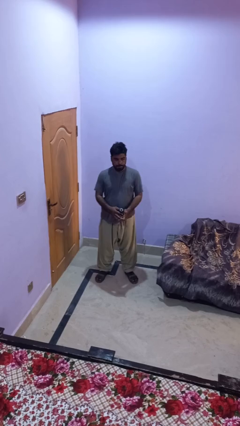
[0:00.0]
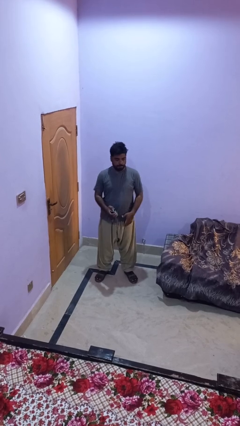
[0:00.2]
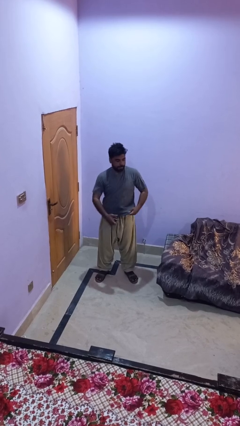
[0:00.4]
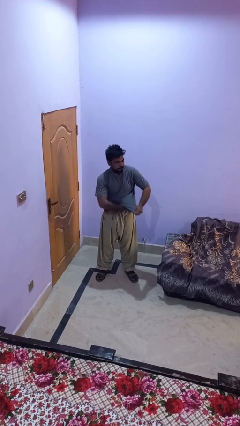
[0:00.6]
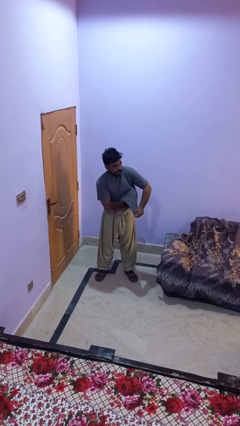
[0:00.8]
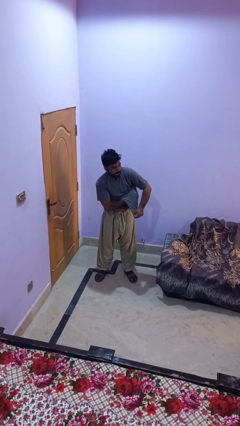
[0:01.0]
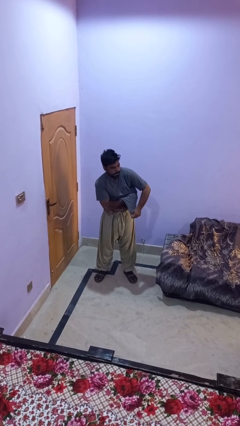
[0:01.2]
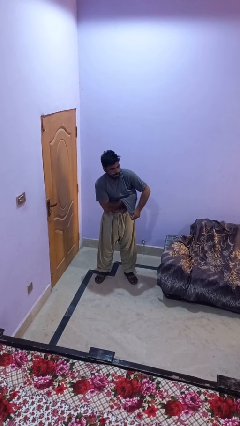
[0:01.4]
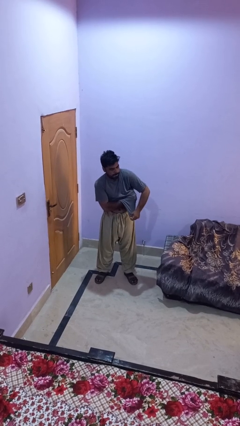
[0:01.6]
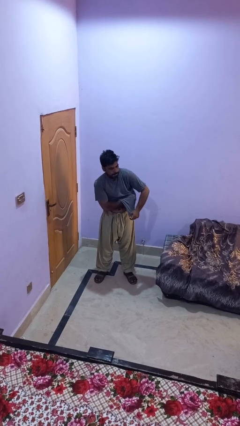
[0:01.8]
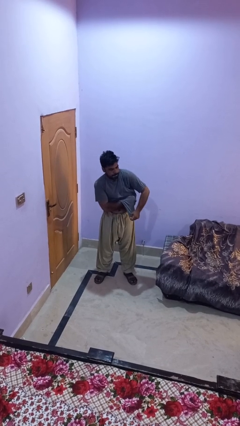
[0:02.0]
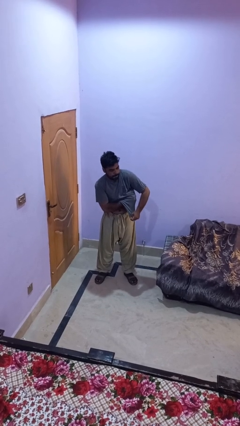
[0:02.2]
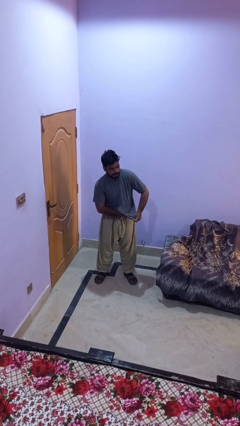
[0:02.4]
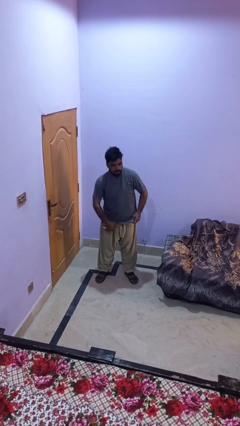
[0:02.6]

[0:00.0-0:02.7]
person applies deodorant

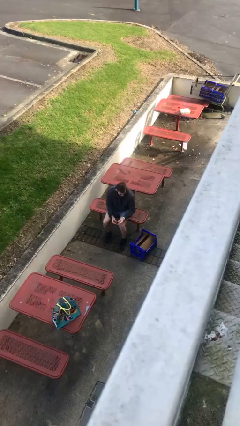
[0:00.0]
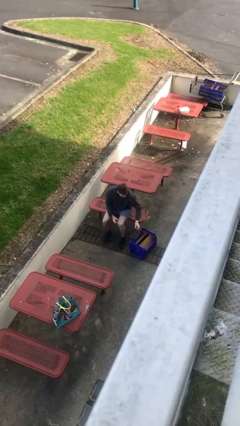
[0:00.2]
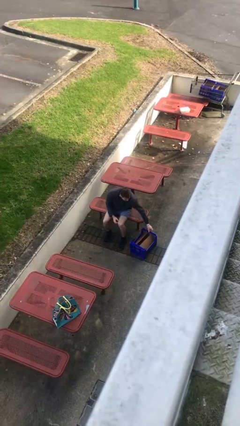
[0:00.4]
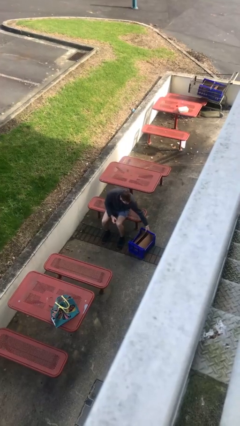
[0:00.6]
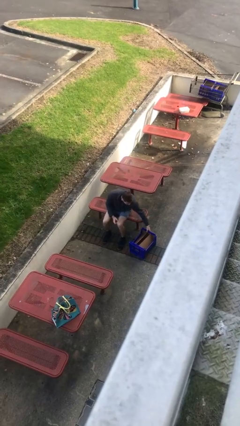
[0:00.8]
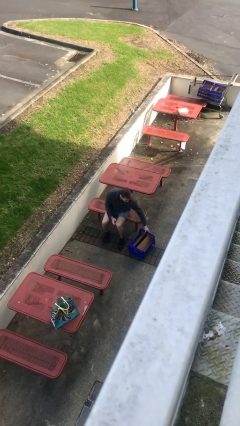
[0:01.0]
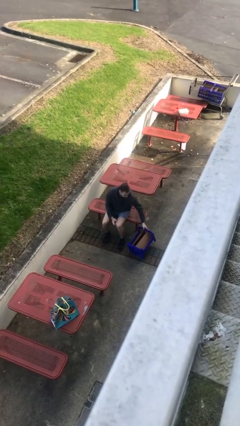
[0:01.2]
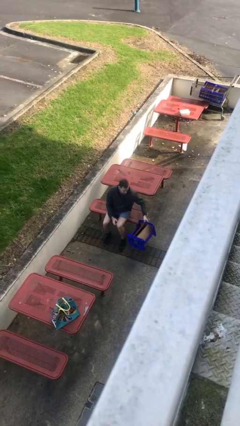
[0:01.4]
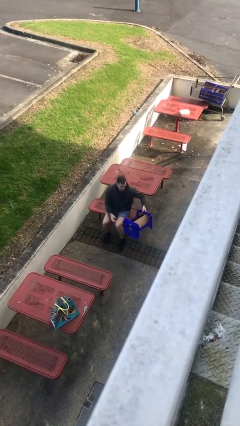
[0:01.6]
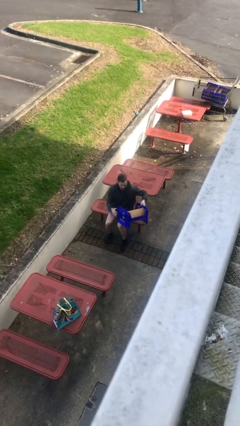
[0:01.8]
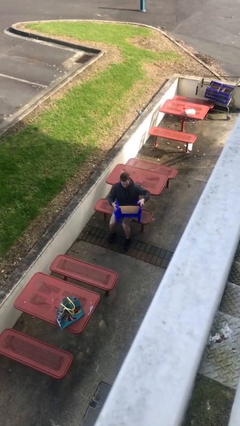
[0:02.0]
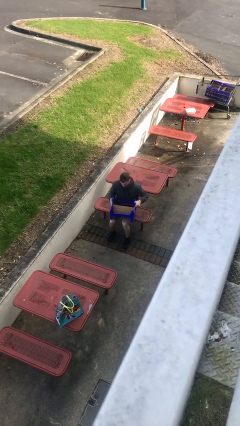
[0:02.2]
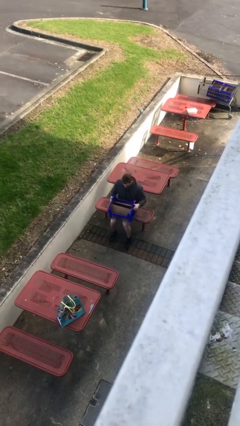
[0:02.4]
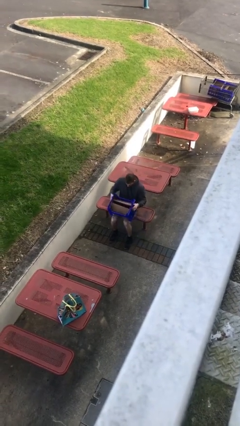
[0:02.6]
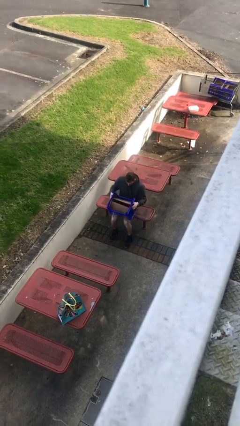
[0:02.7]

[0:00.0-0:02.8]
person picks up object from floor

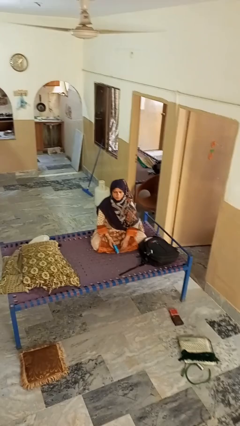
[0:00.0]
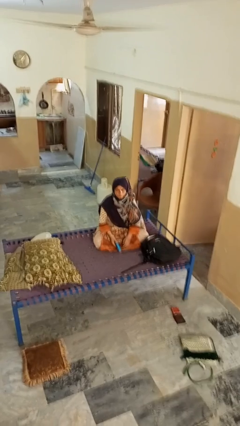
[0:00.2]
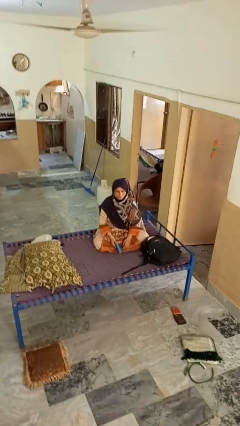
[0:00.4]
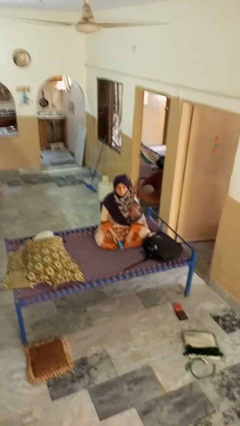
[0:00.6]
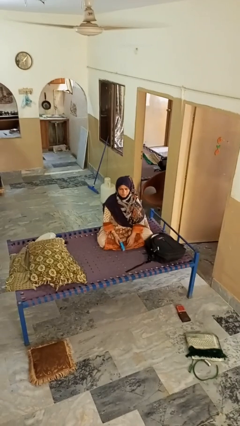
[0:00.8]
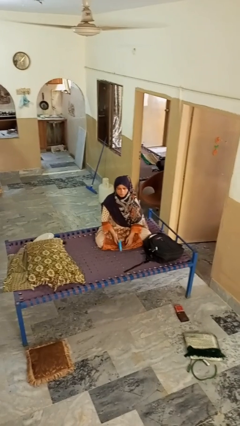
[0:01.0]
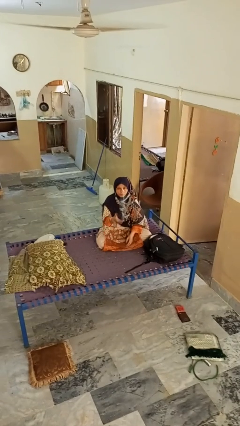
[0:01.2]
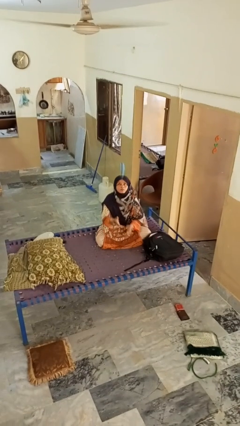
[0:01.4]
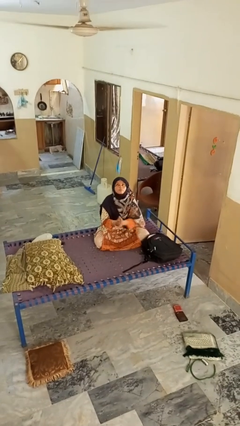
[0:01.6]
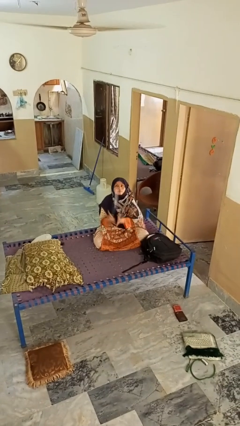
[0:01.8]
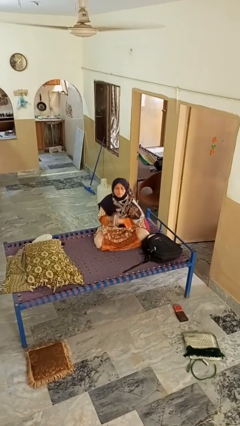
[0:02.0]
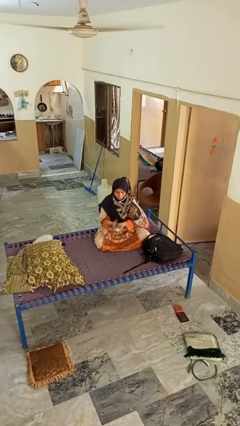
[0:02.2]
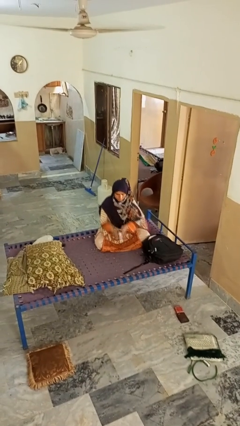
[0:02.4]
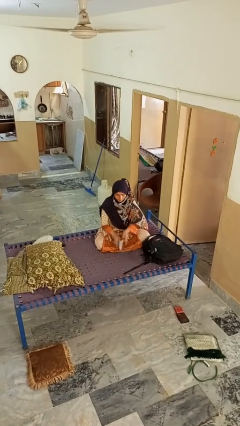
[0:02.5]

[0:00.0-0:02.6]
person drops object

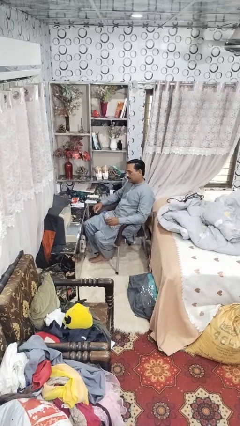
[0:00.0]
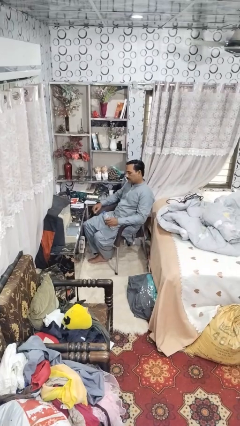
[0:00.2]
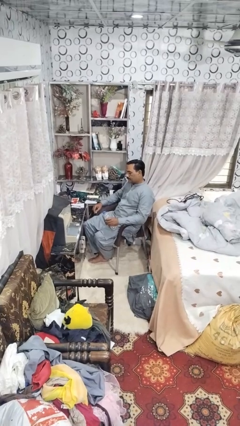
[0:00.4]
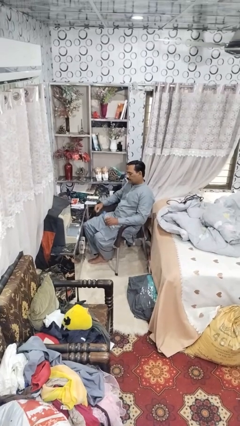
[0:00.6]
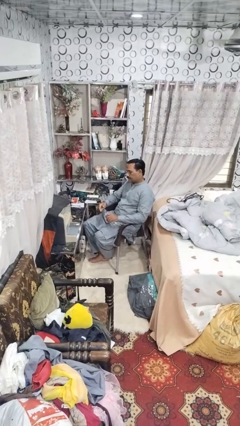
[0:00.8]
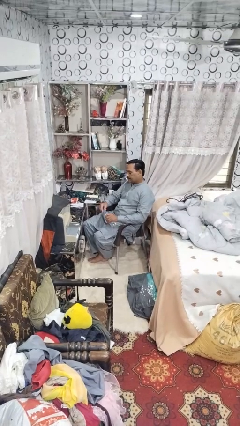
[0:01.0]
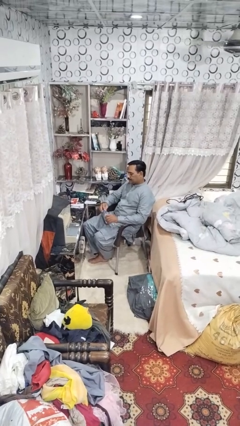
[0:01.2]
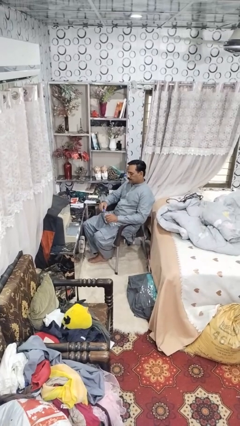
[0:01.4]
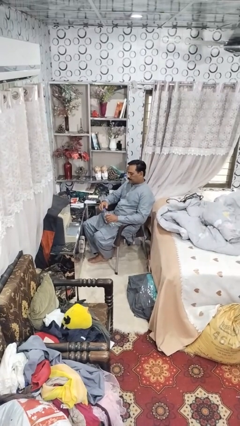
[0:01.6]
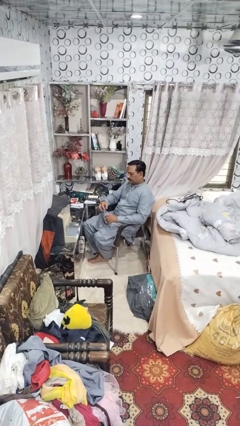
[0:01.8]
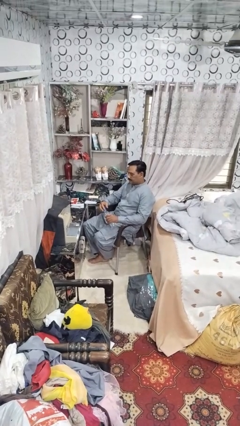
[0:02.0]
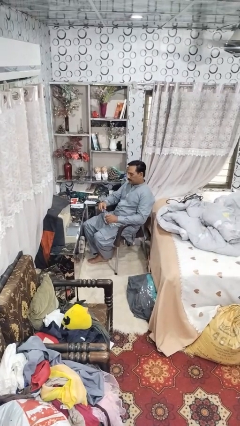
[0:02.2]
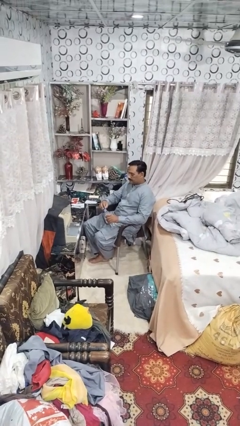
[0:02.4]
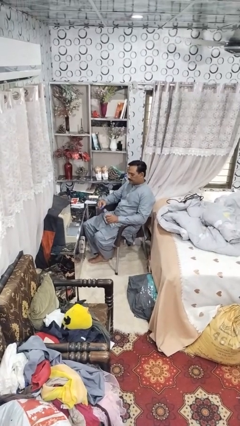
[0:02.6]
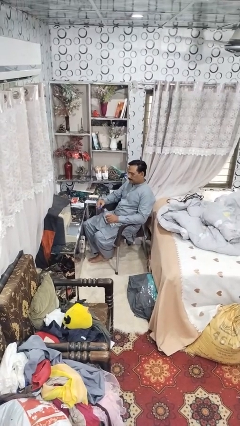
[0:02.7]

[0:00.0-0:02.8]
person unscrews lid from bottle

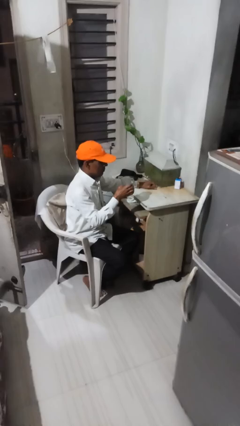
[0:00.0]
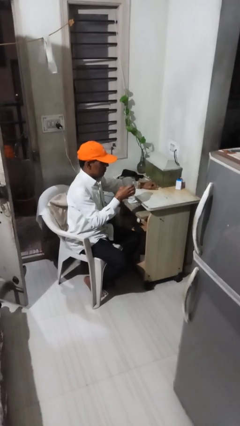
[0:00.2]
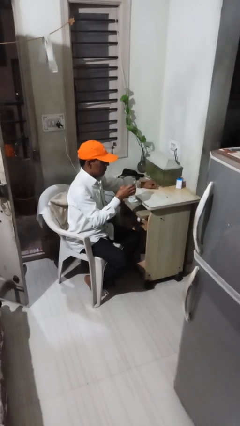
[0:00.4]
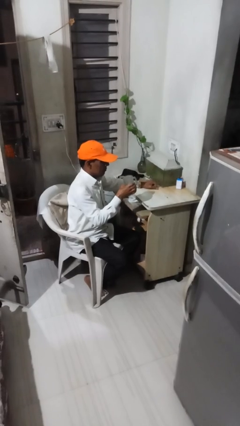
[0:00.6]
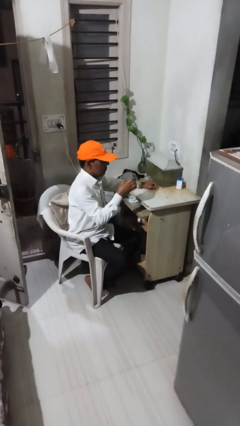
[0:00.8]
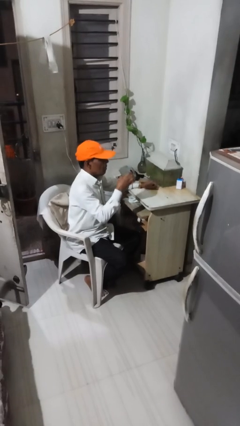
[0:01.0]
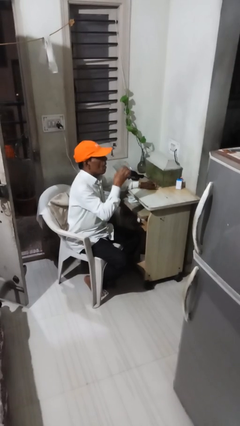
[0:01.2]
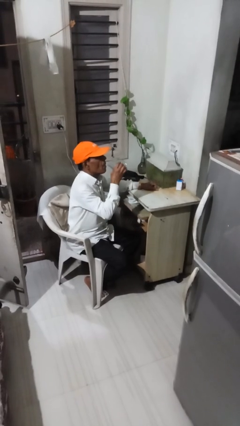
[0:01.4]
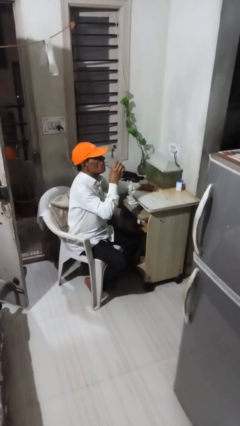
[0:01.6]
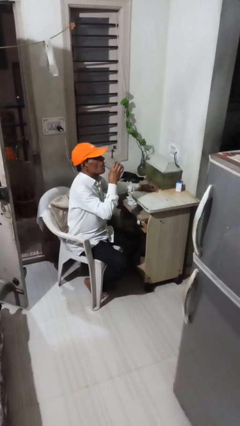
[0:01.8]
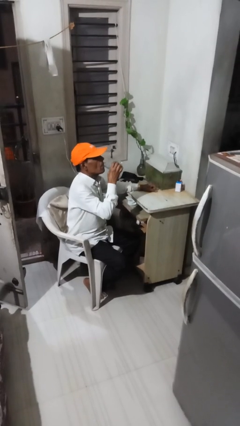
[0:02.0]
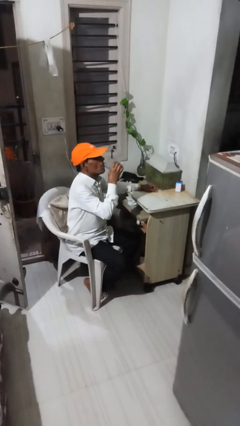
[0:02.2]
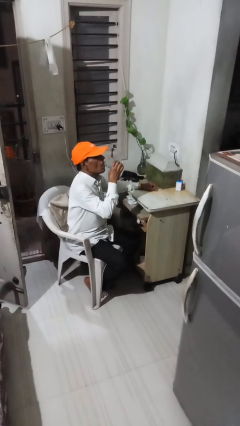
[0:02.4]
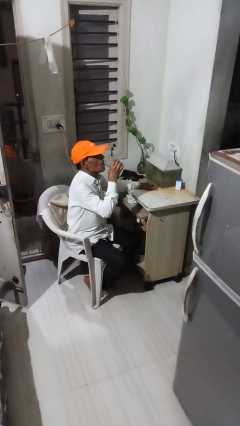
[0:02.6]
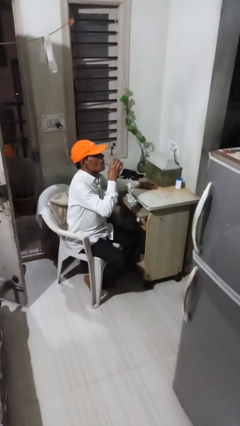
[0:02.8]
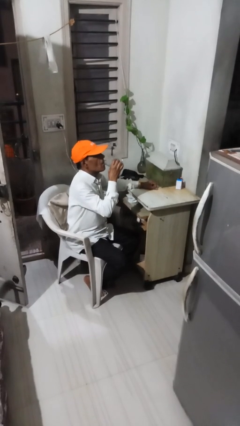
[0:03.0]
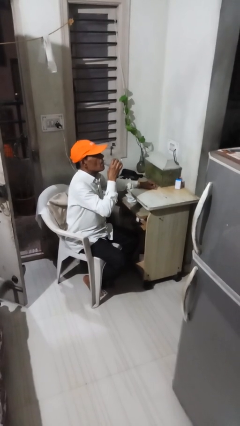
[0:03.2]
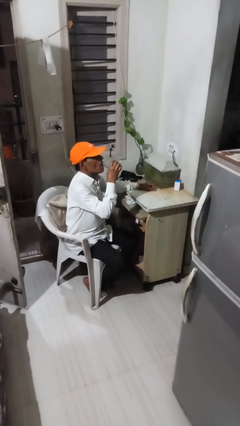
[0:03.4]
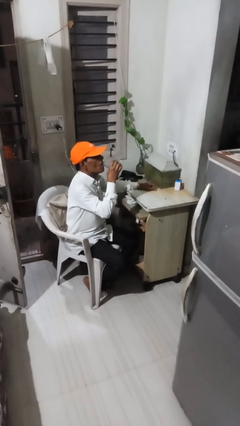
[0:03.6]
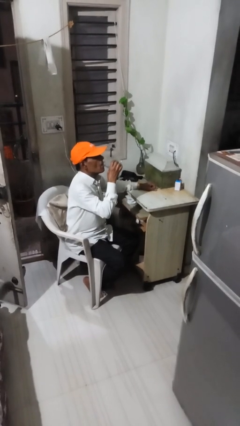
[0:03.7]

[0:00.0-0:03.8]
person drinks from mug

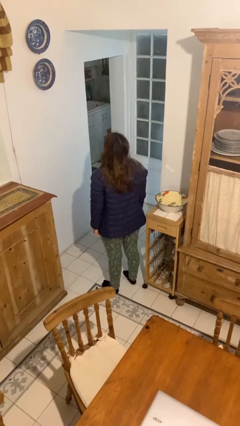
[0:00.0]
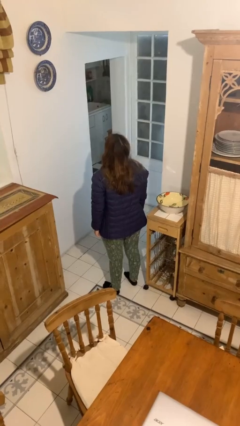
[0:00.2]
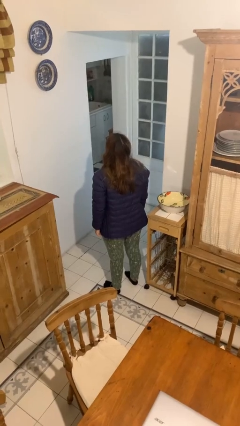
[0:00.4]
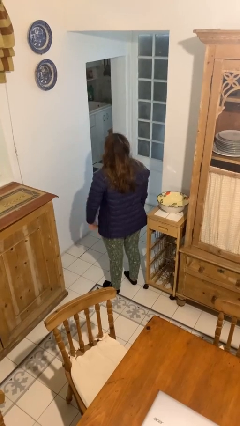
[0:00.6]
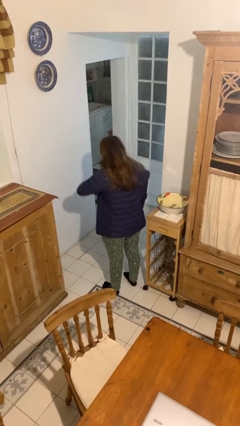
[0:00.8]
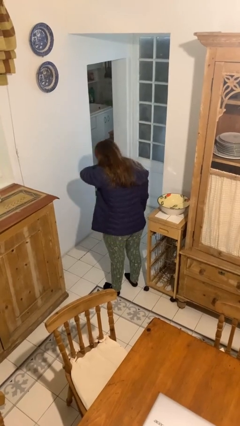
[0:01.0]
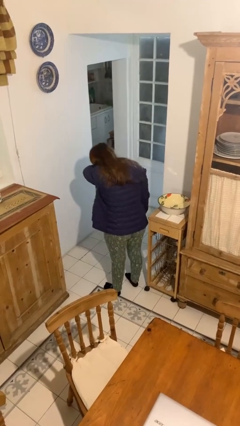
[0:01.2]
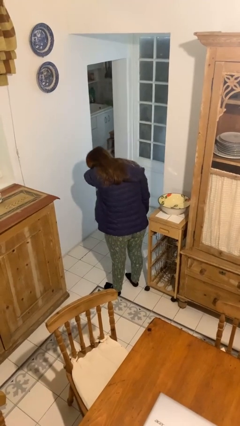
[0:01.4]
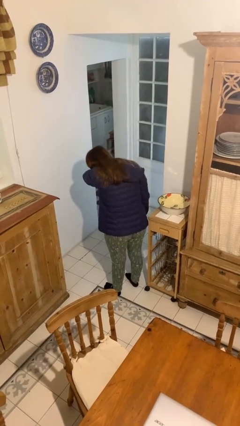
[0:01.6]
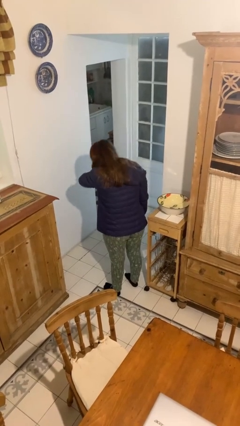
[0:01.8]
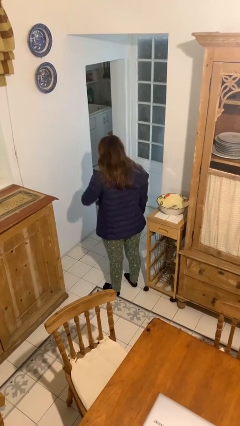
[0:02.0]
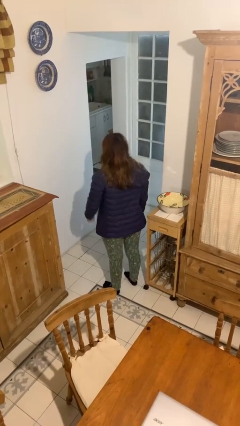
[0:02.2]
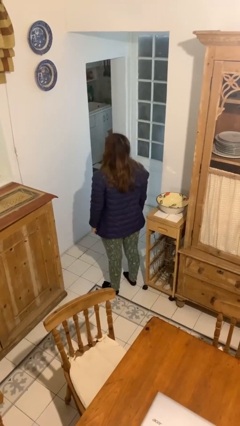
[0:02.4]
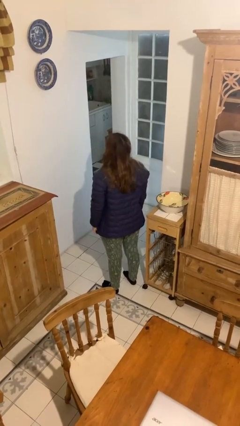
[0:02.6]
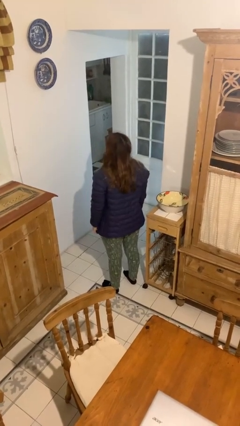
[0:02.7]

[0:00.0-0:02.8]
person sneezes into arm
